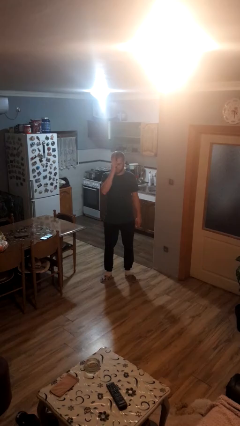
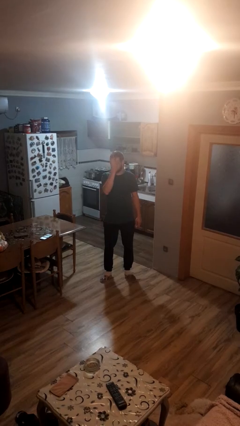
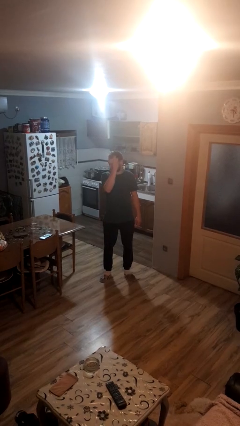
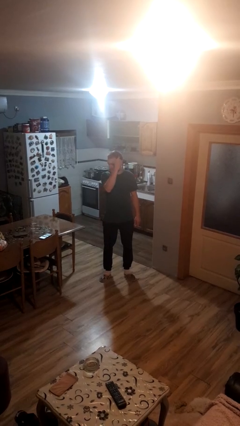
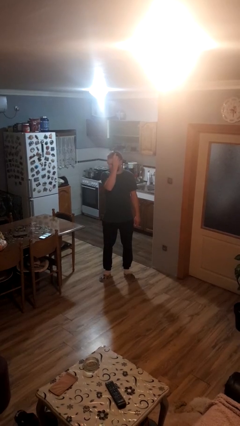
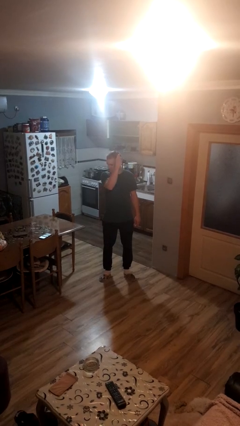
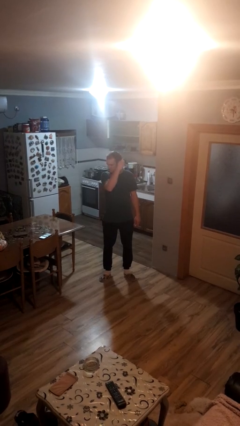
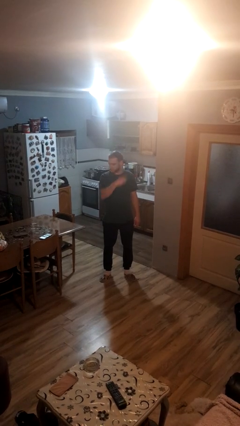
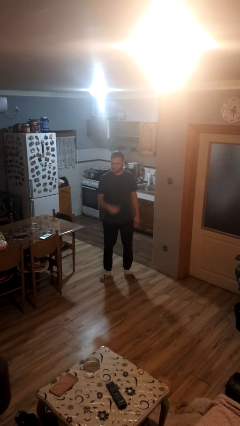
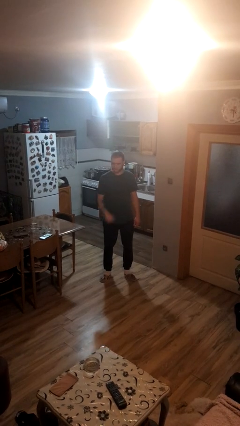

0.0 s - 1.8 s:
person brushes hair

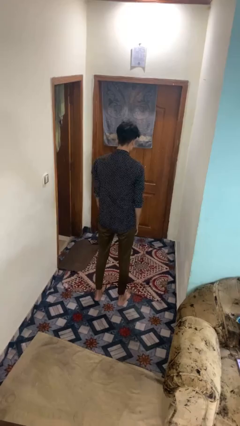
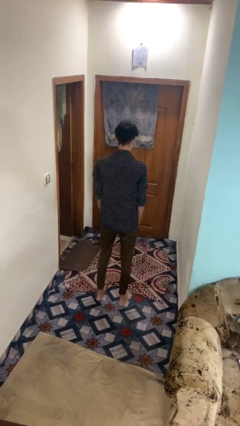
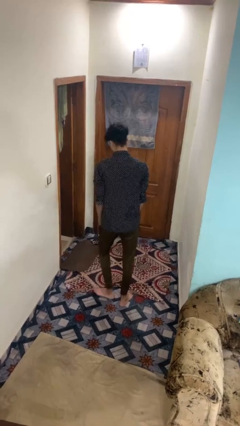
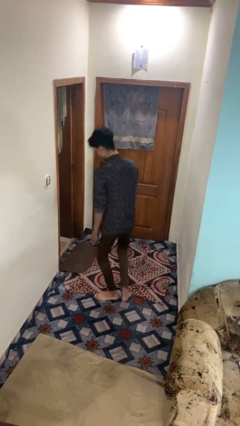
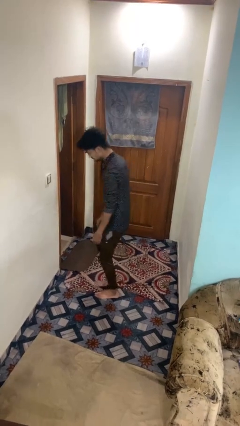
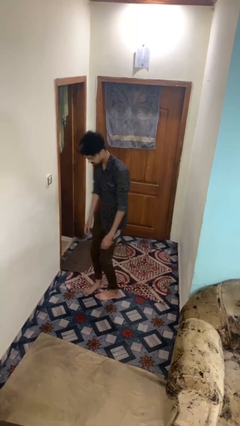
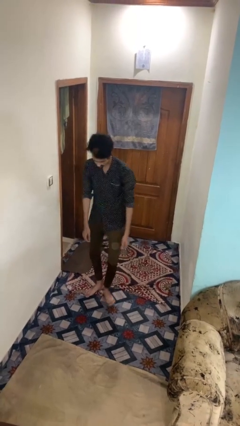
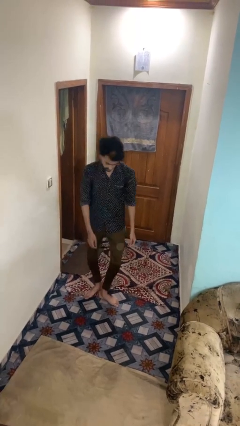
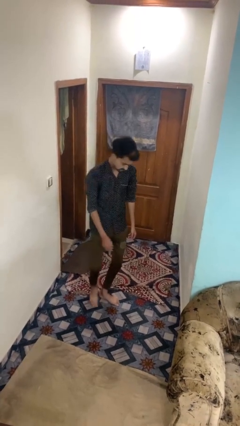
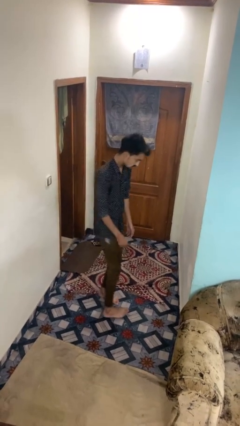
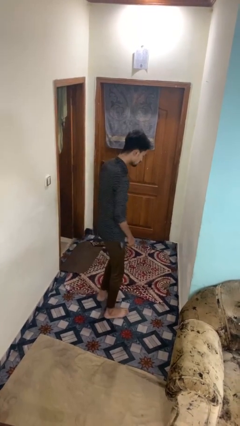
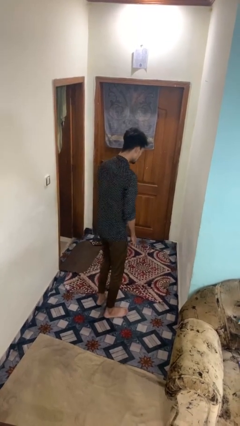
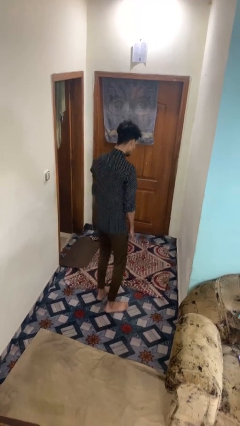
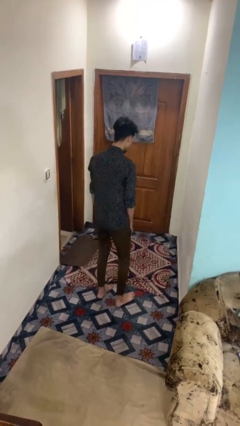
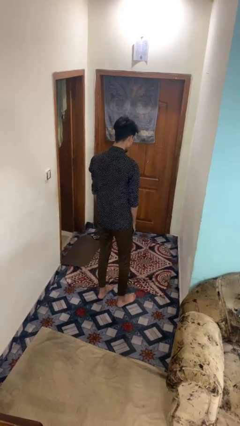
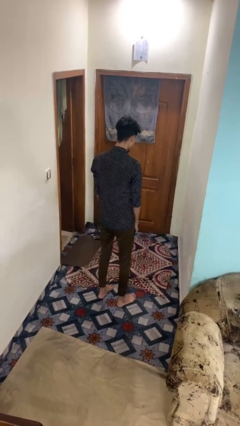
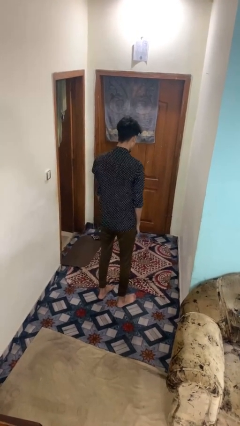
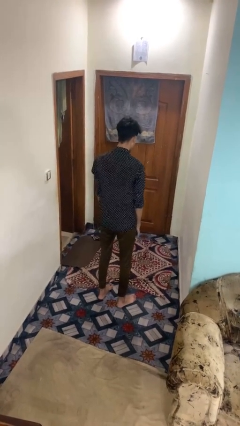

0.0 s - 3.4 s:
person twirls

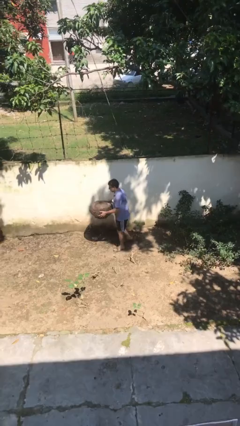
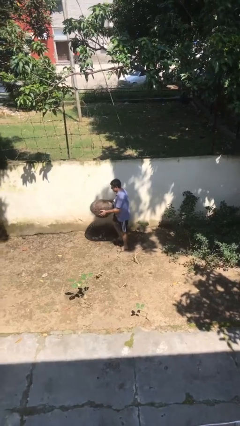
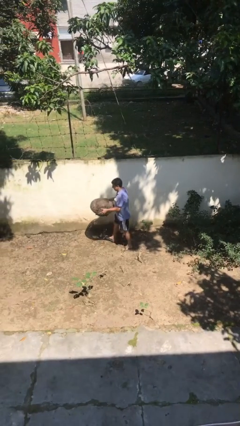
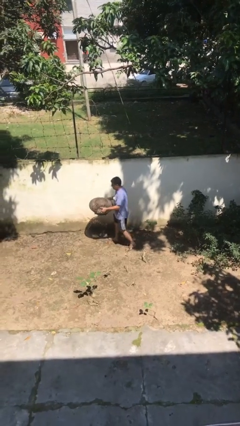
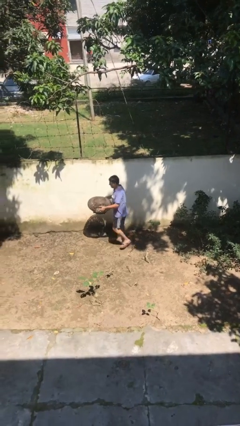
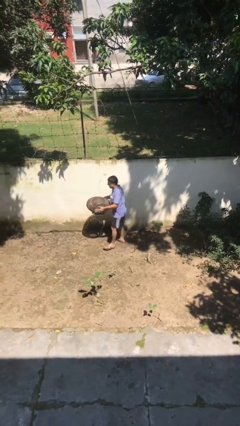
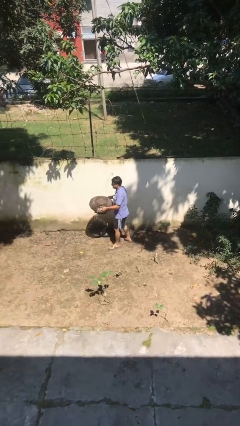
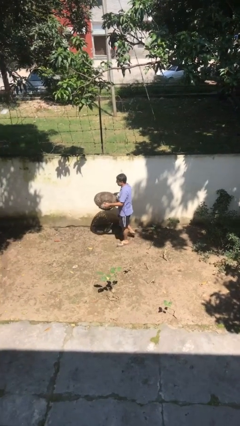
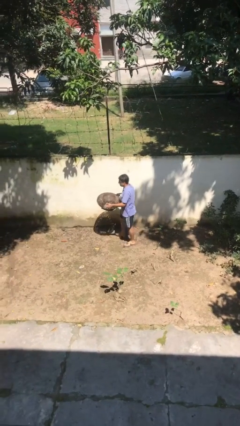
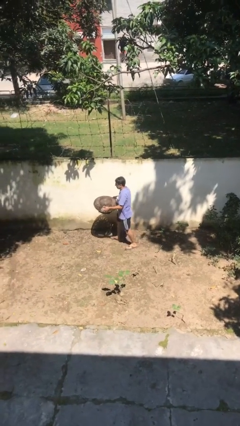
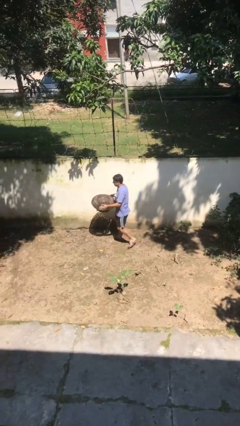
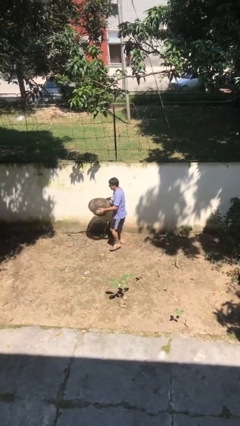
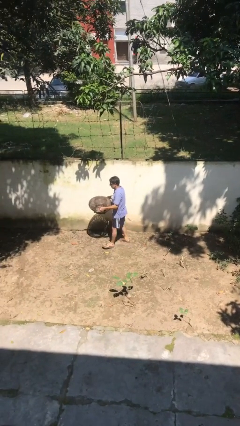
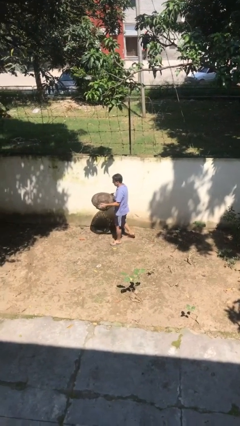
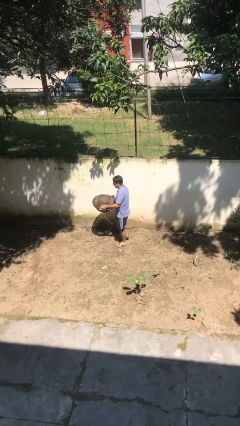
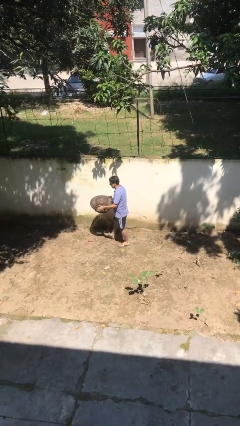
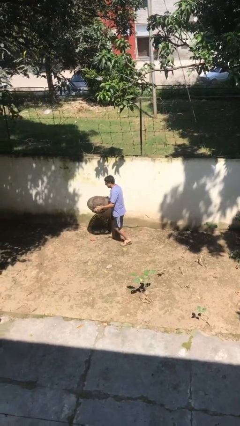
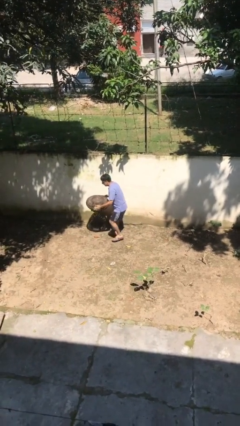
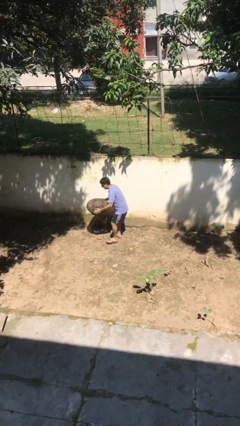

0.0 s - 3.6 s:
person carries heavy object

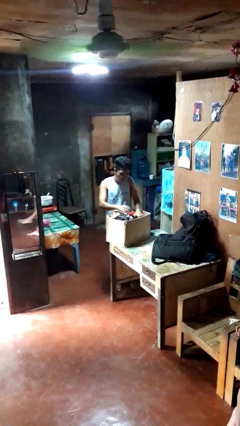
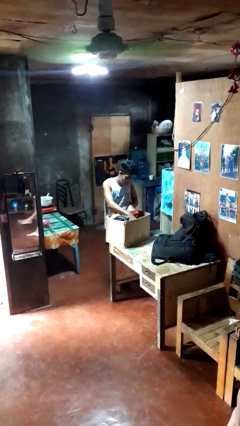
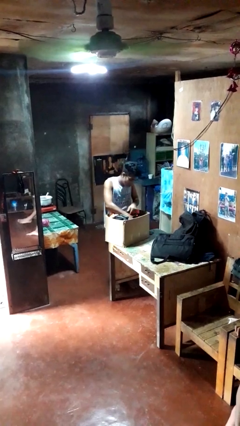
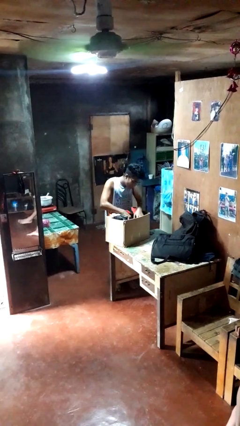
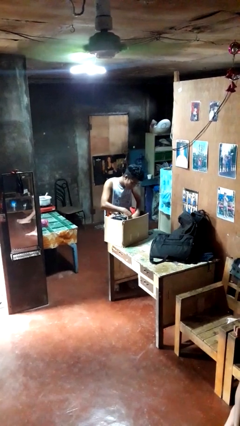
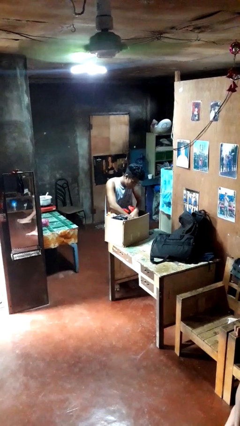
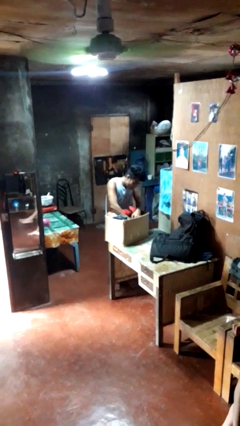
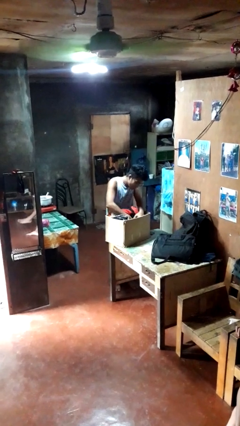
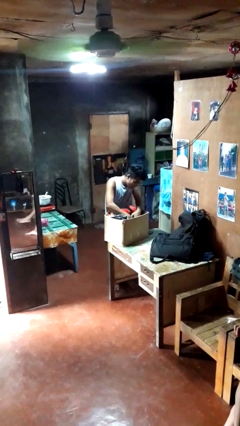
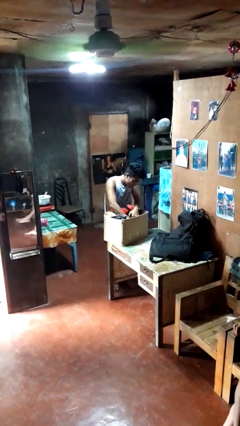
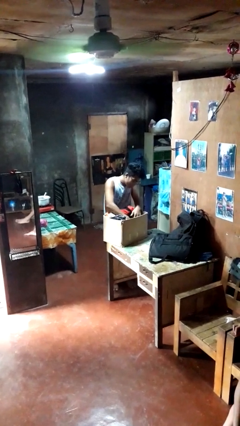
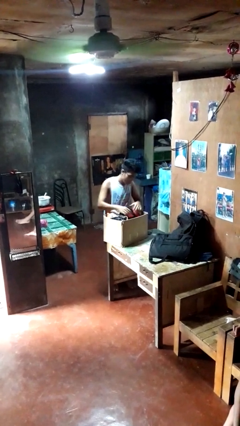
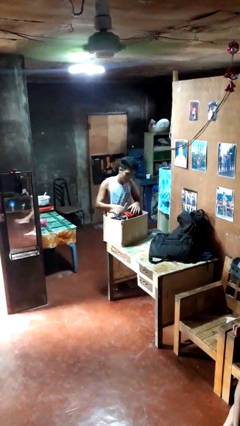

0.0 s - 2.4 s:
person searches in box

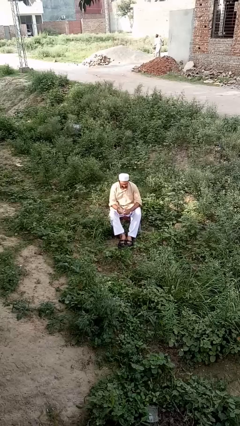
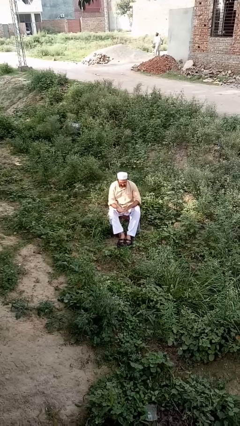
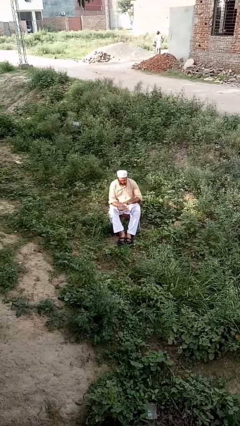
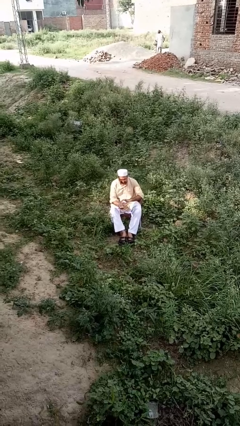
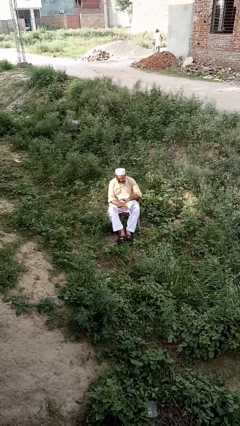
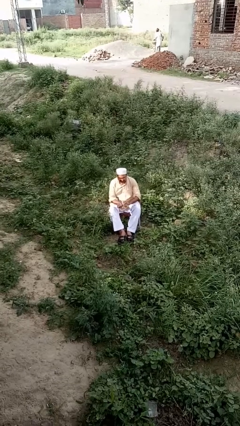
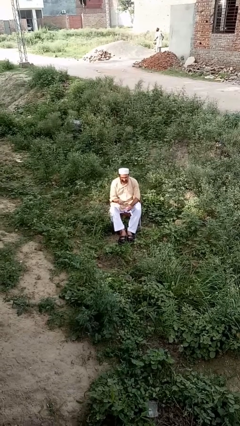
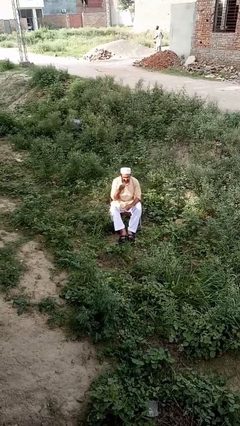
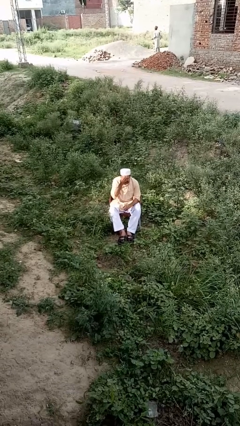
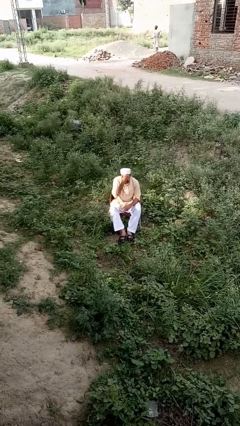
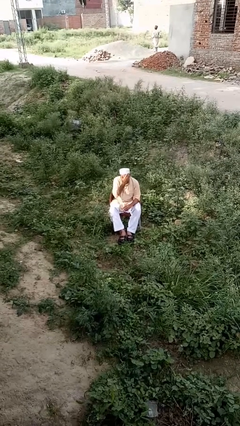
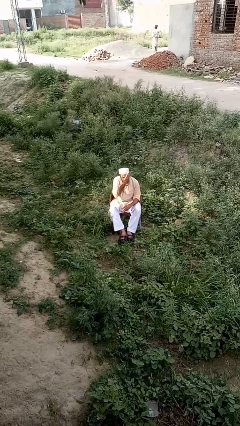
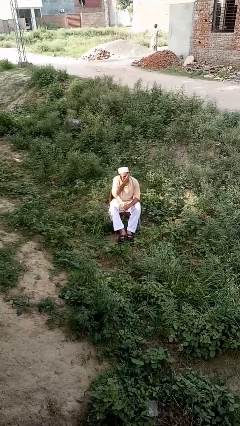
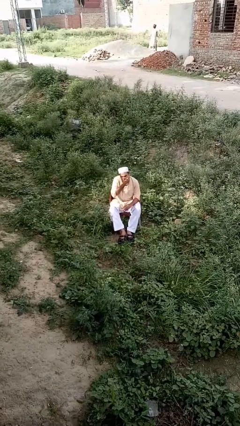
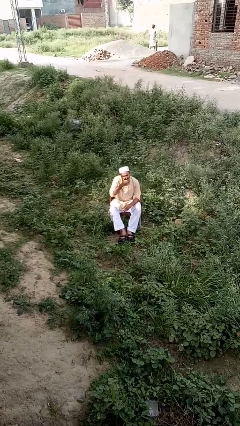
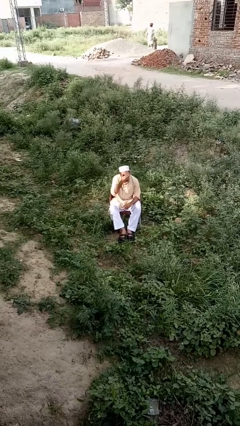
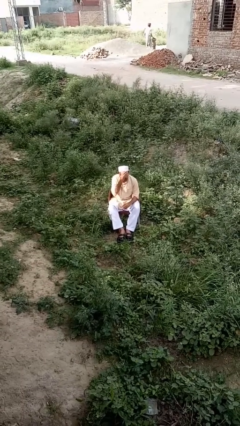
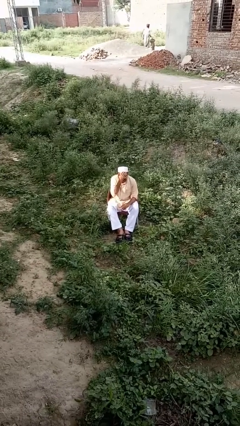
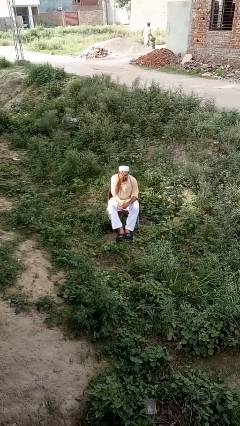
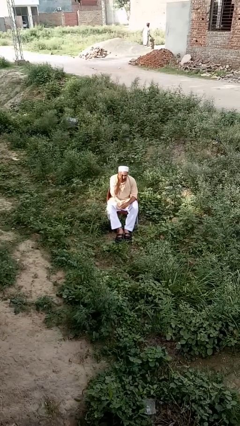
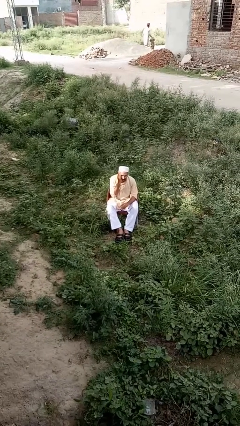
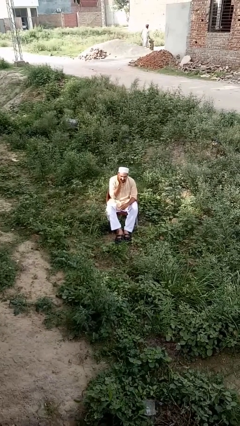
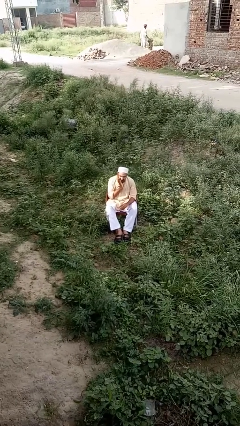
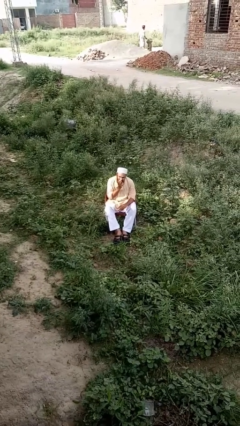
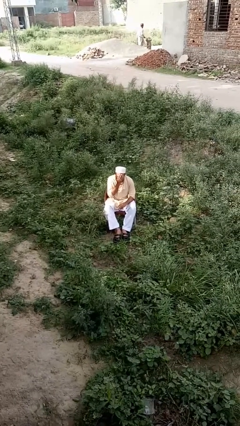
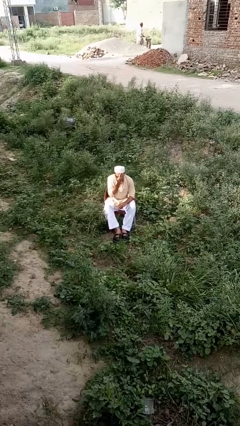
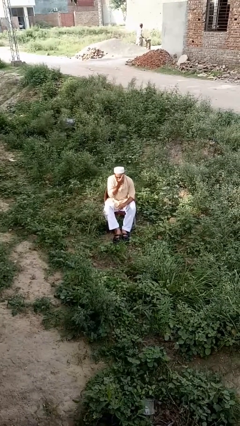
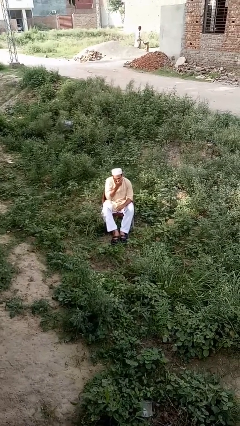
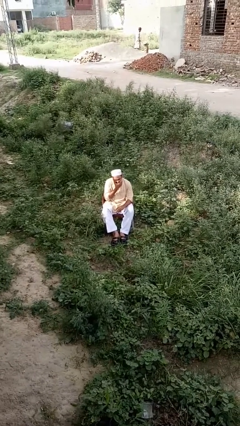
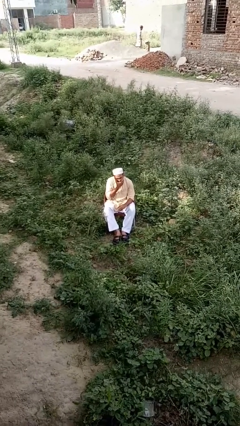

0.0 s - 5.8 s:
person applies sunscreen

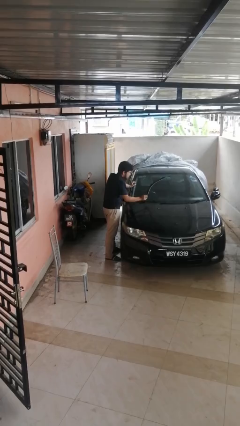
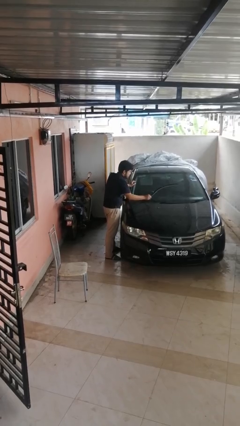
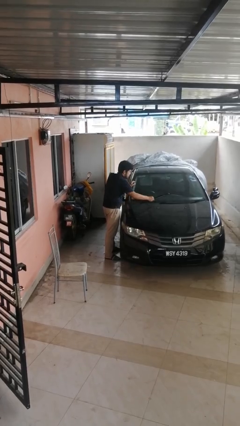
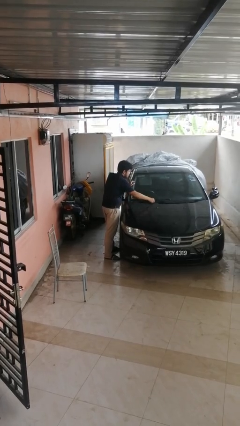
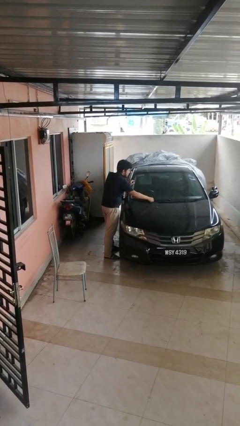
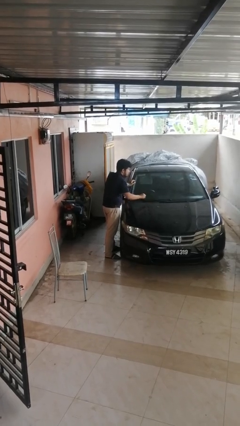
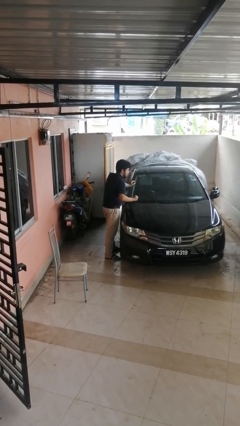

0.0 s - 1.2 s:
person flips down car wipers
